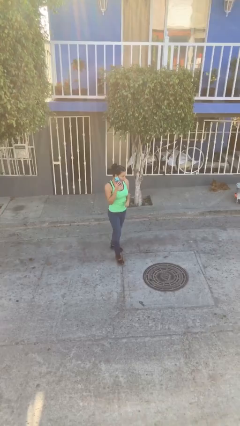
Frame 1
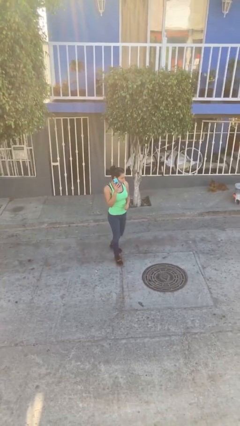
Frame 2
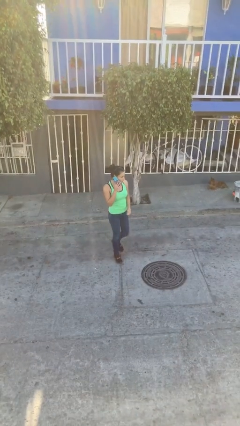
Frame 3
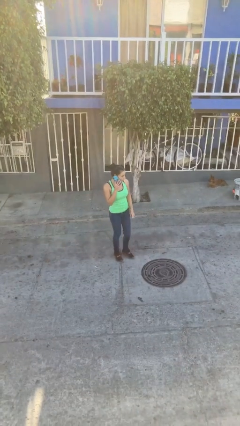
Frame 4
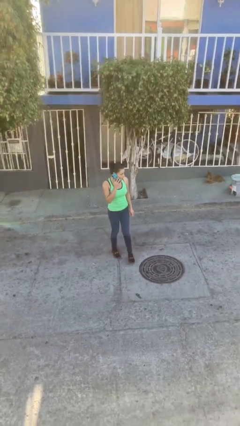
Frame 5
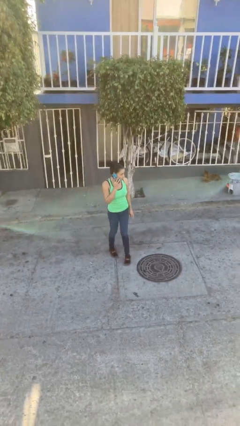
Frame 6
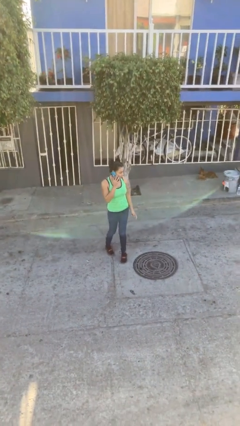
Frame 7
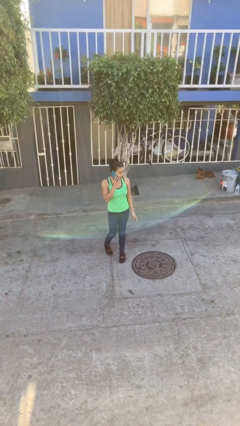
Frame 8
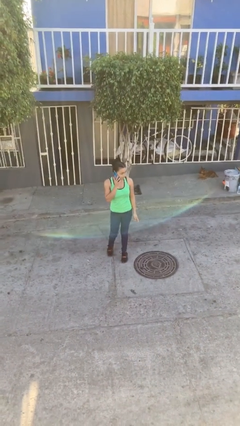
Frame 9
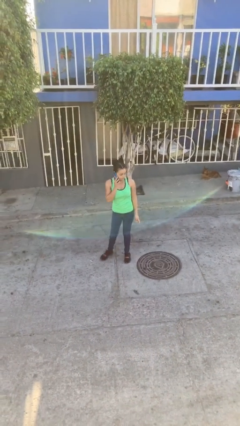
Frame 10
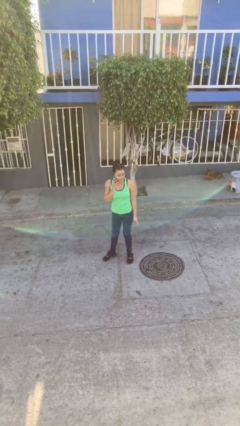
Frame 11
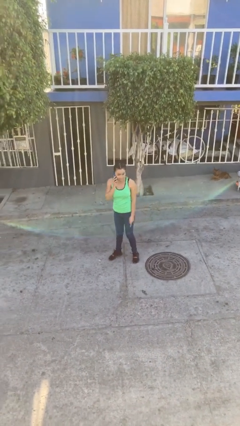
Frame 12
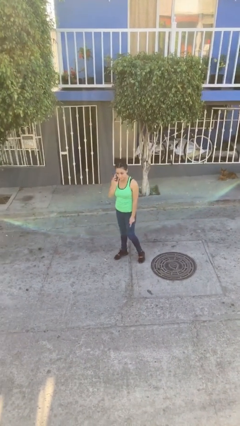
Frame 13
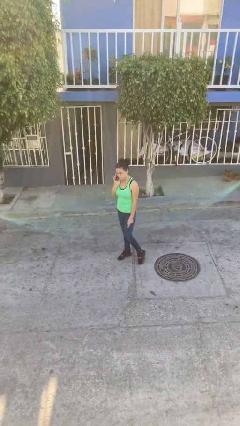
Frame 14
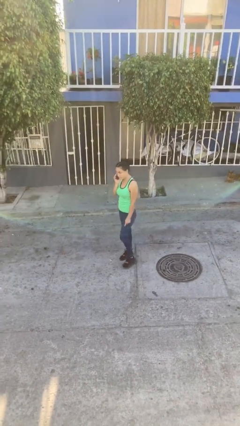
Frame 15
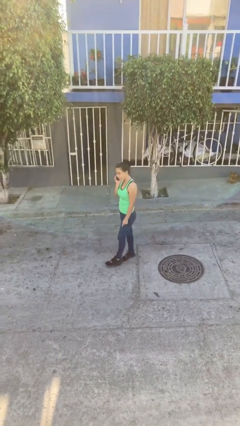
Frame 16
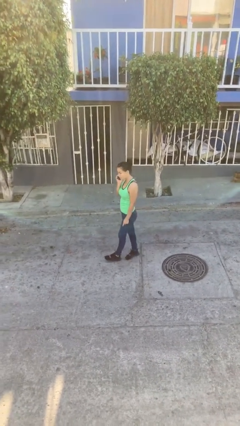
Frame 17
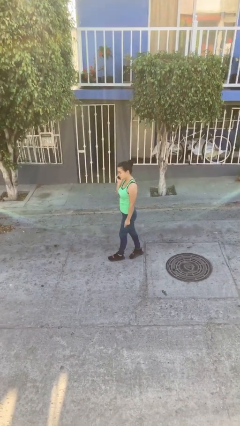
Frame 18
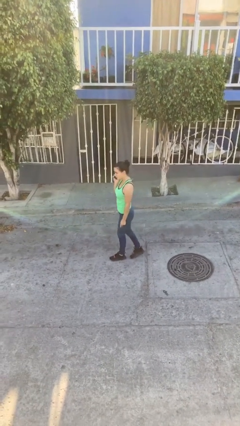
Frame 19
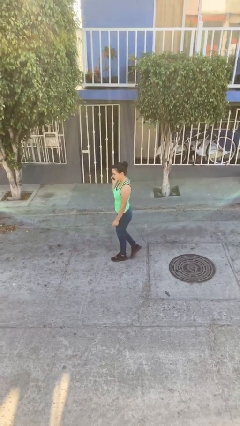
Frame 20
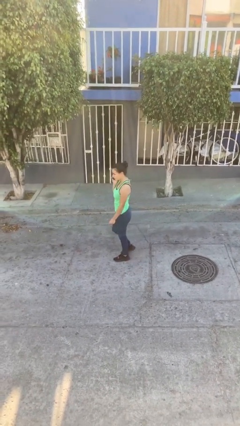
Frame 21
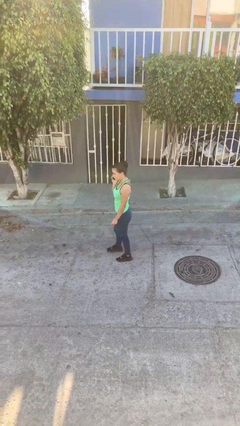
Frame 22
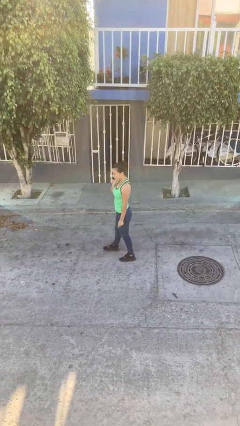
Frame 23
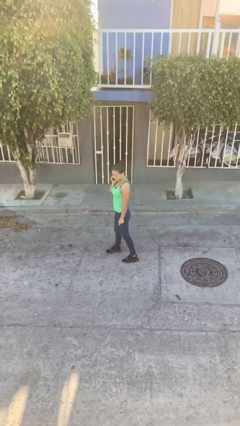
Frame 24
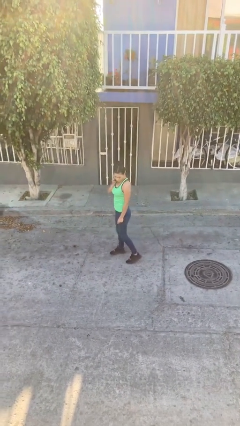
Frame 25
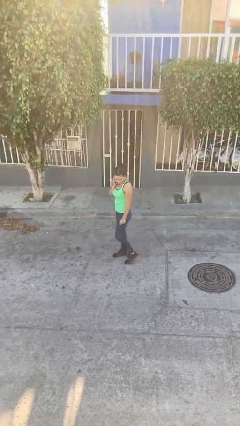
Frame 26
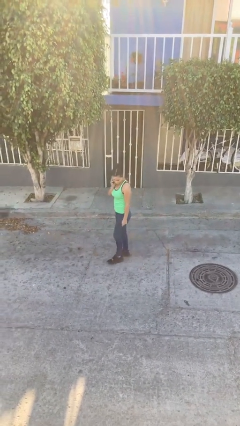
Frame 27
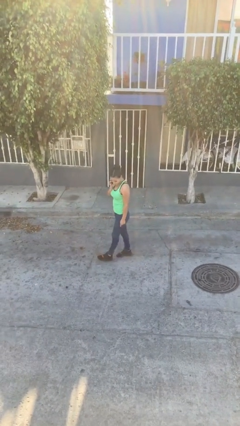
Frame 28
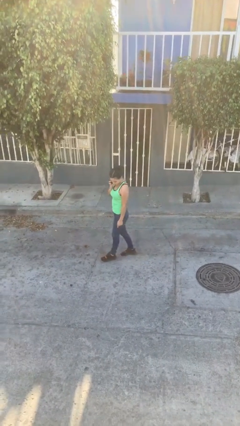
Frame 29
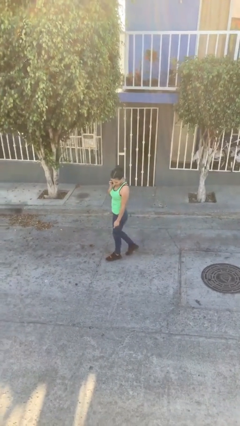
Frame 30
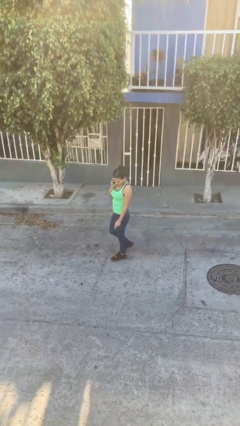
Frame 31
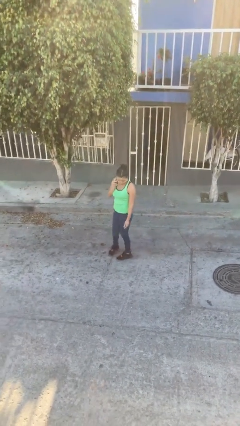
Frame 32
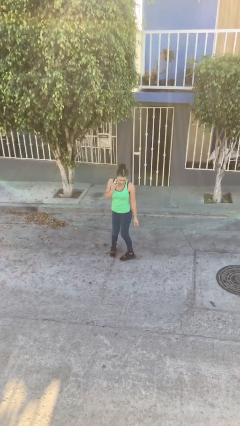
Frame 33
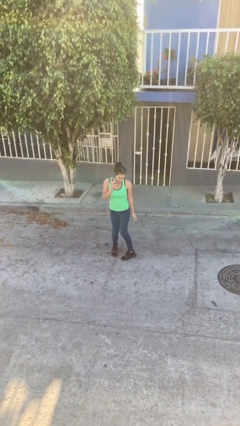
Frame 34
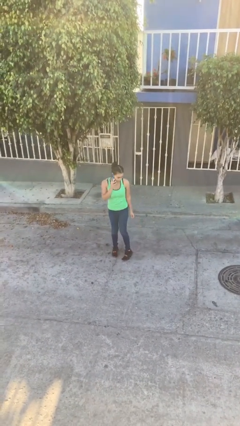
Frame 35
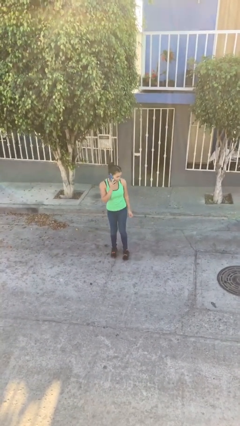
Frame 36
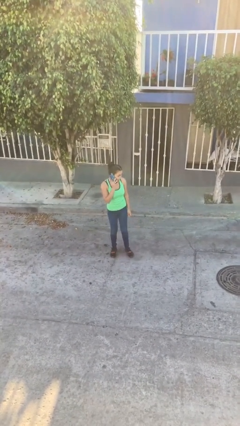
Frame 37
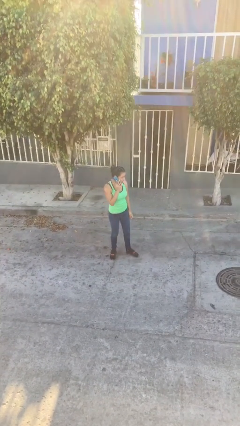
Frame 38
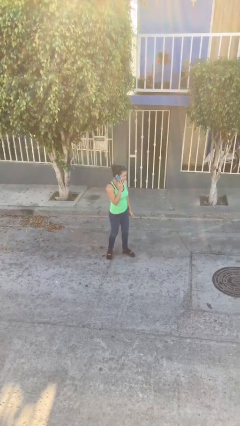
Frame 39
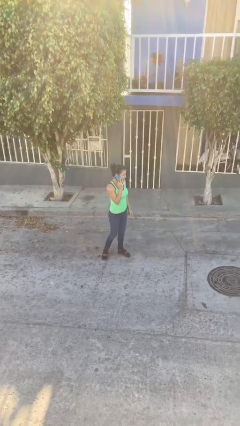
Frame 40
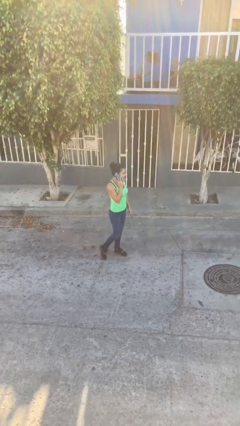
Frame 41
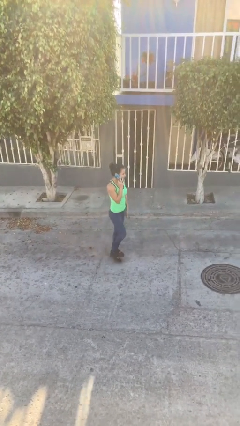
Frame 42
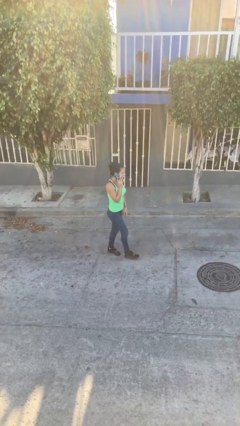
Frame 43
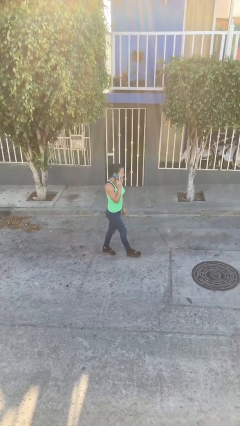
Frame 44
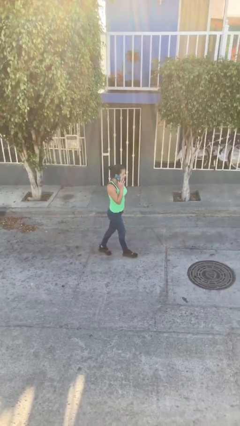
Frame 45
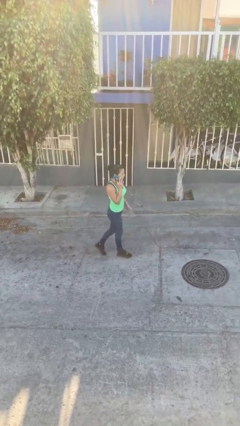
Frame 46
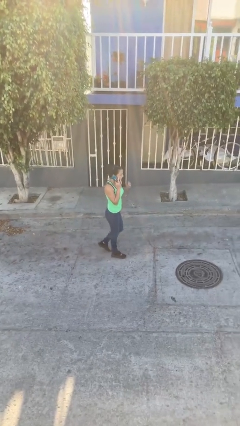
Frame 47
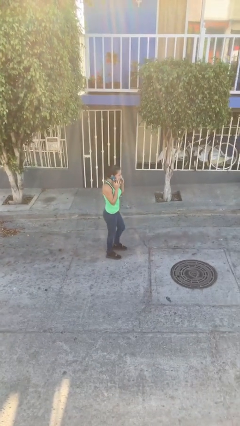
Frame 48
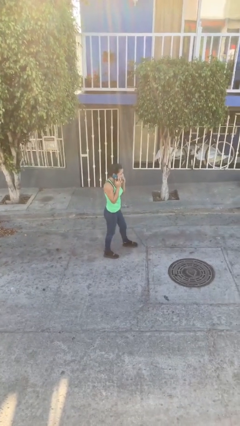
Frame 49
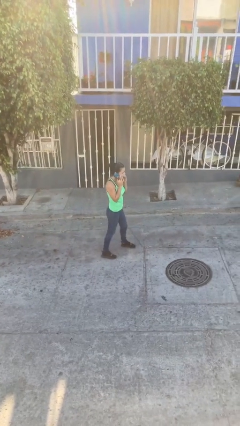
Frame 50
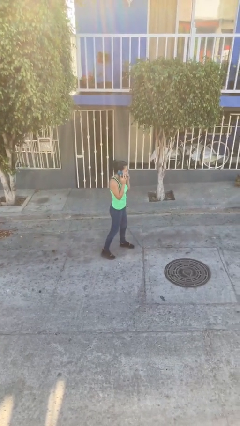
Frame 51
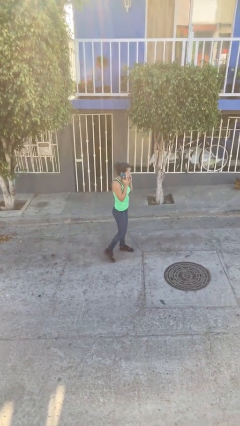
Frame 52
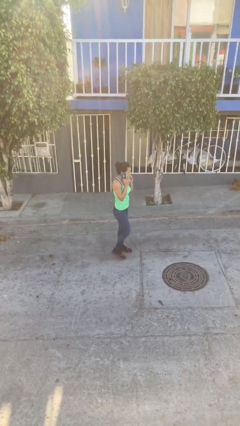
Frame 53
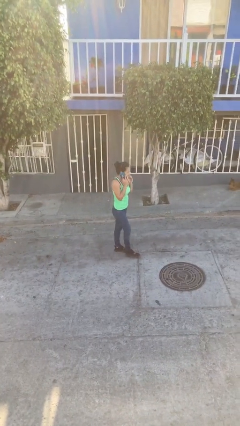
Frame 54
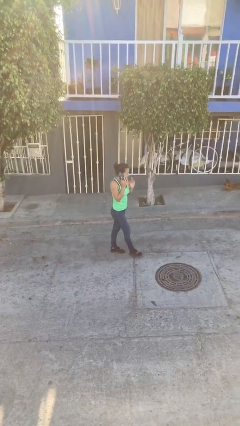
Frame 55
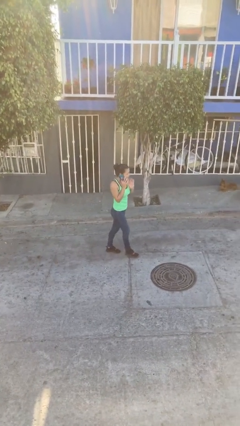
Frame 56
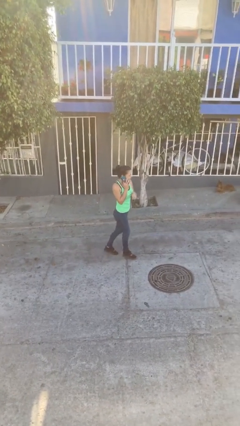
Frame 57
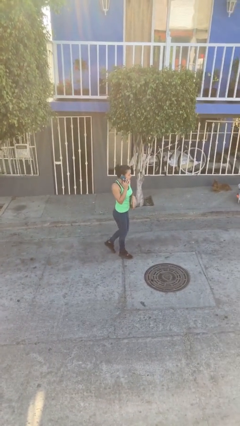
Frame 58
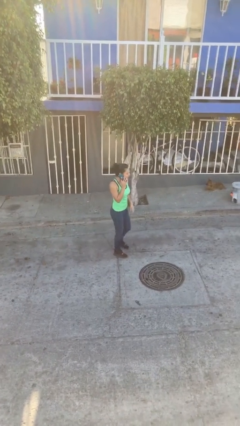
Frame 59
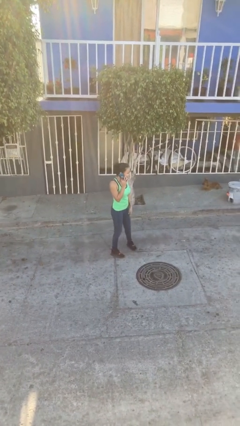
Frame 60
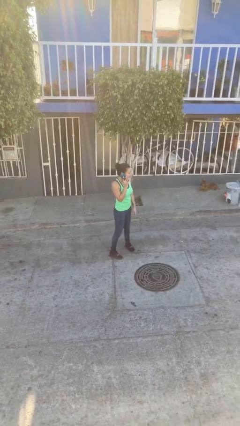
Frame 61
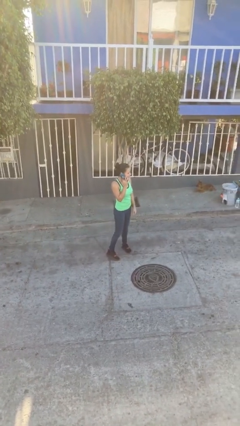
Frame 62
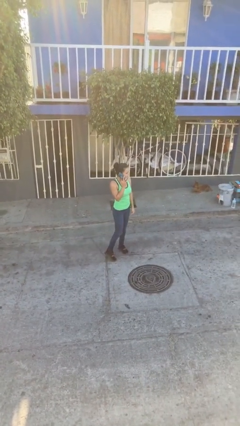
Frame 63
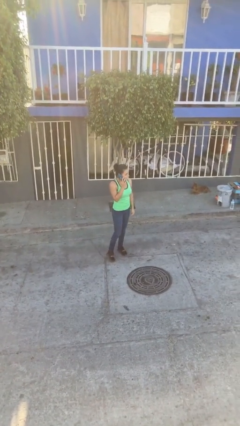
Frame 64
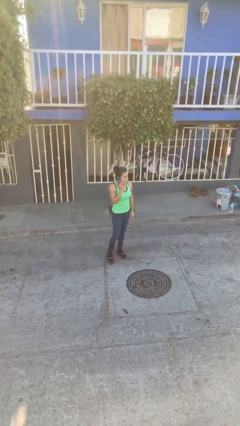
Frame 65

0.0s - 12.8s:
person talks on phone

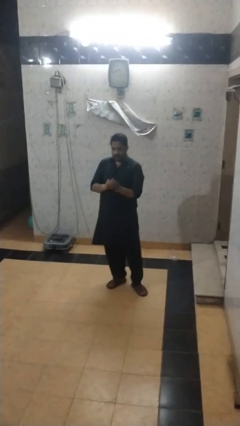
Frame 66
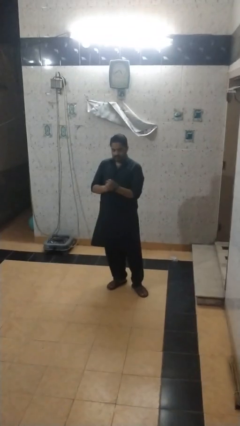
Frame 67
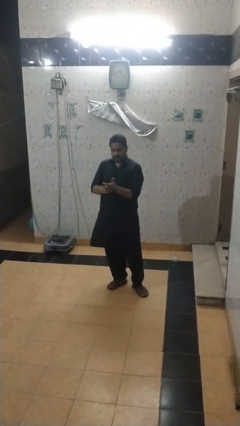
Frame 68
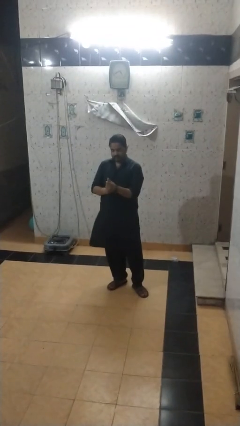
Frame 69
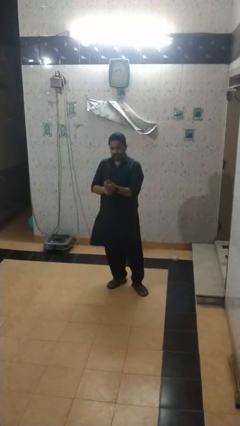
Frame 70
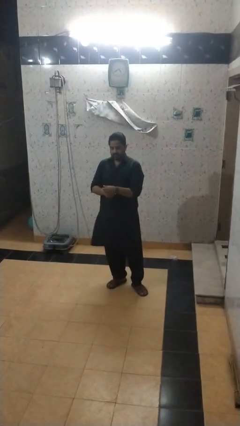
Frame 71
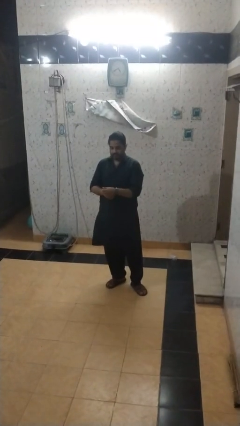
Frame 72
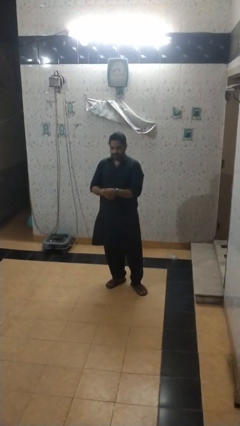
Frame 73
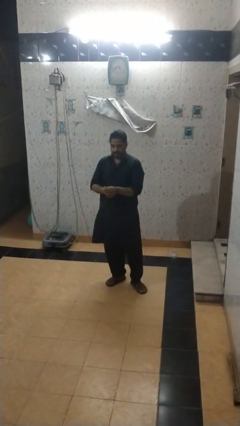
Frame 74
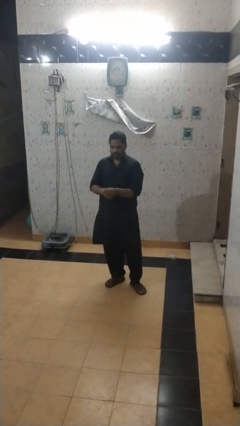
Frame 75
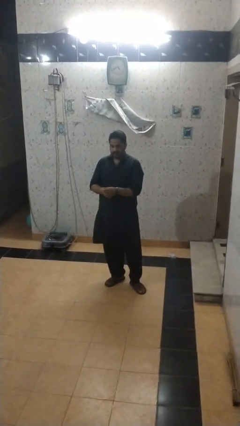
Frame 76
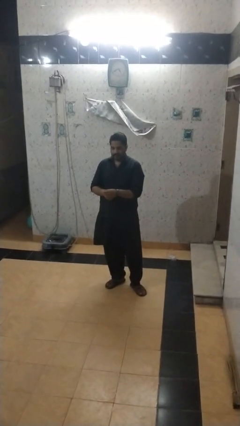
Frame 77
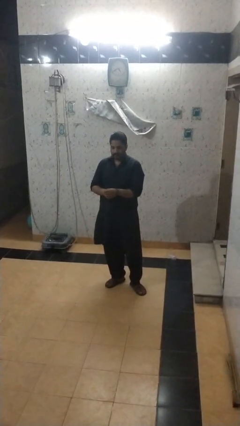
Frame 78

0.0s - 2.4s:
person puts on wristwatch

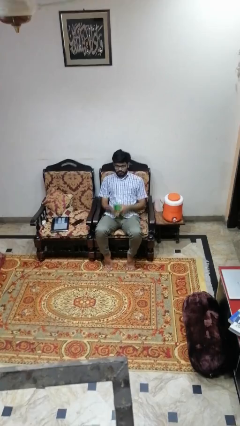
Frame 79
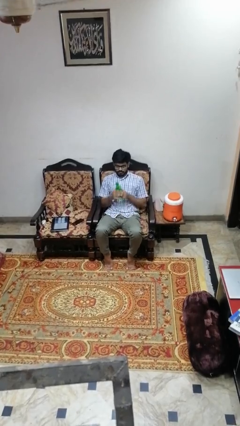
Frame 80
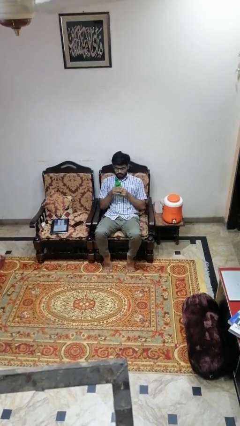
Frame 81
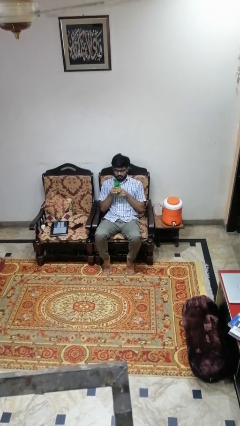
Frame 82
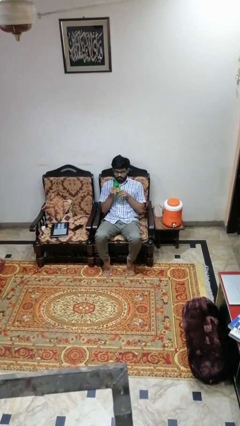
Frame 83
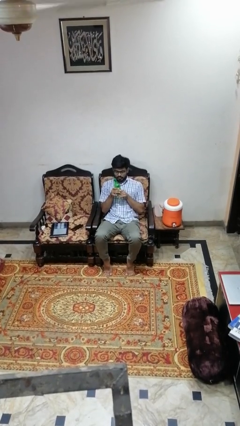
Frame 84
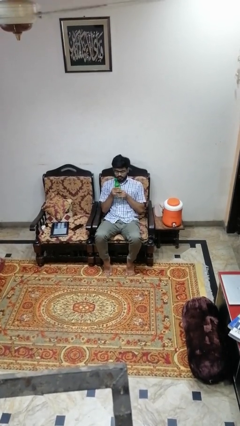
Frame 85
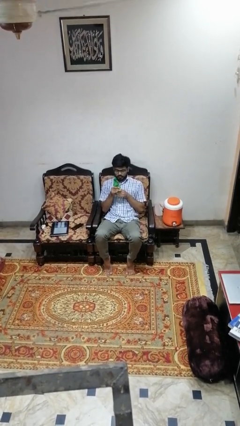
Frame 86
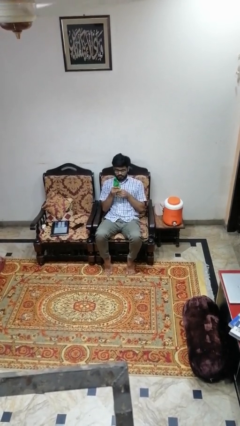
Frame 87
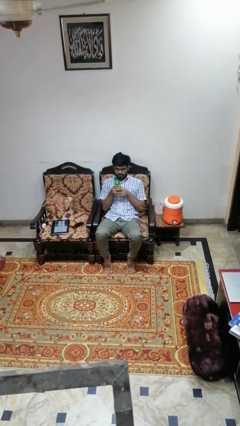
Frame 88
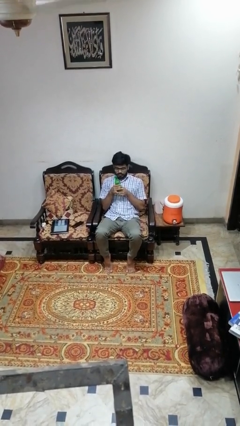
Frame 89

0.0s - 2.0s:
person squeezes object

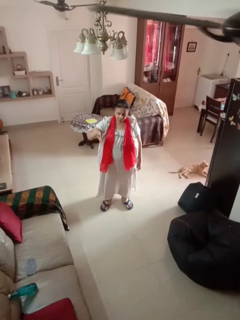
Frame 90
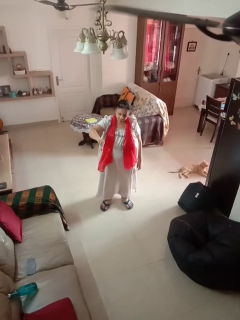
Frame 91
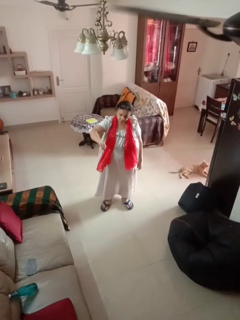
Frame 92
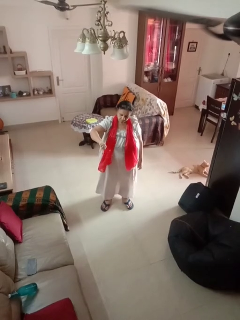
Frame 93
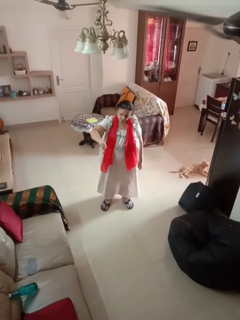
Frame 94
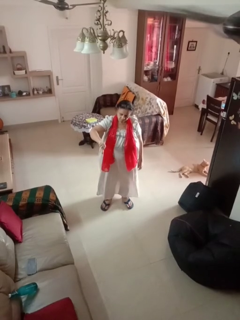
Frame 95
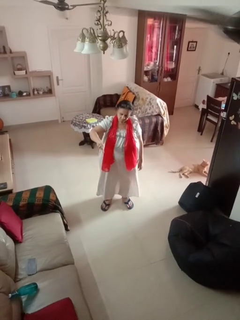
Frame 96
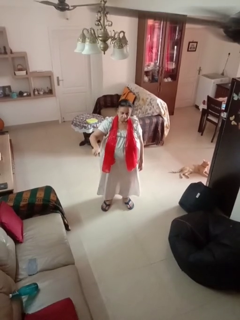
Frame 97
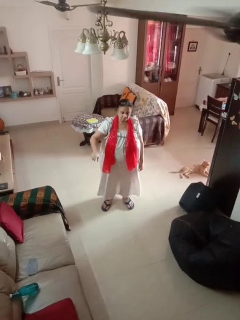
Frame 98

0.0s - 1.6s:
person gestures thumbs down
